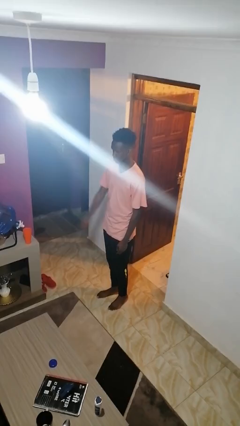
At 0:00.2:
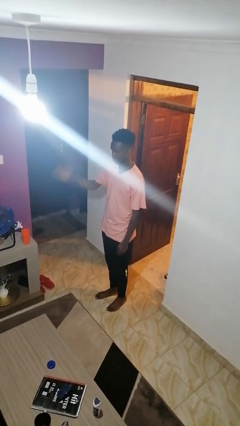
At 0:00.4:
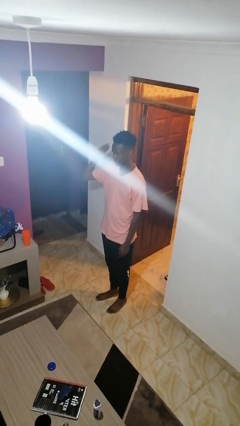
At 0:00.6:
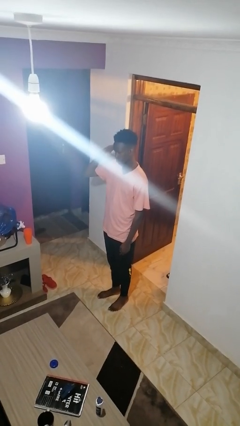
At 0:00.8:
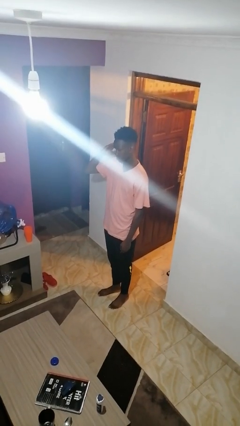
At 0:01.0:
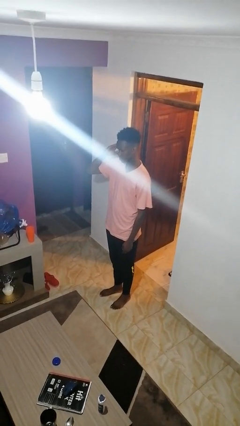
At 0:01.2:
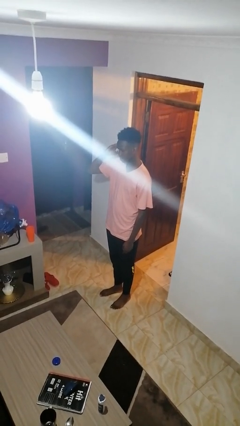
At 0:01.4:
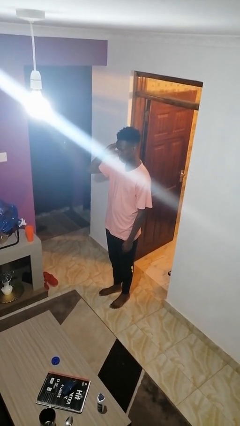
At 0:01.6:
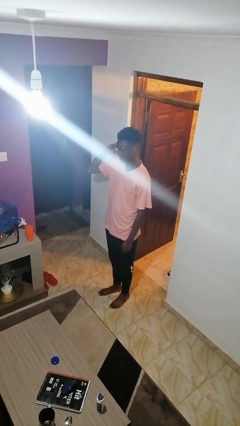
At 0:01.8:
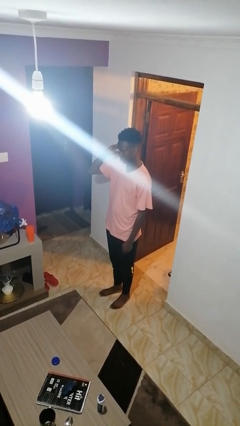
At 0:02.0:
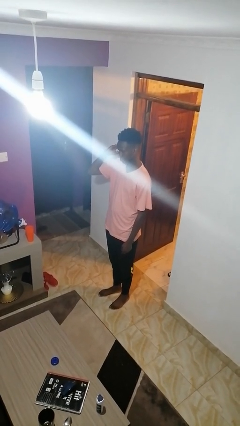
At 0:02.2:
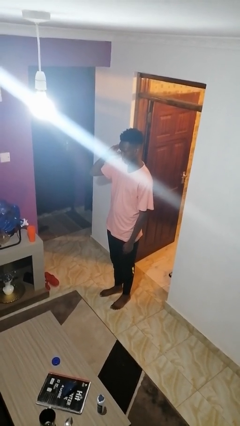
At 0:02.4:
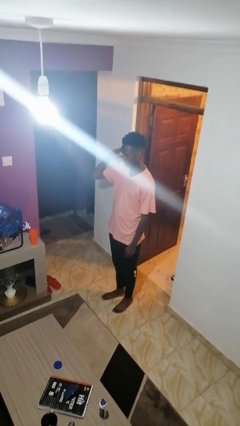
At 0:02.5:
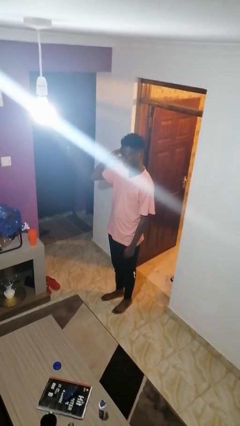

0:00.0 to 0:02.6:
person salutes

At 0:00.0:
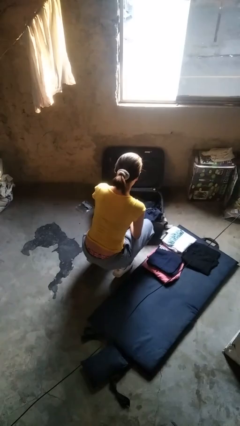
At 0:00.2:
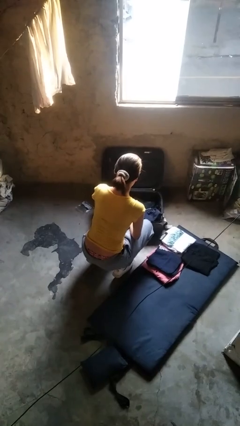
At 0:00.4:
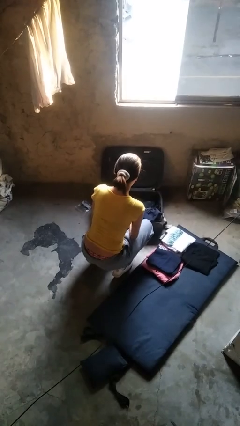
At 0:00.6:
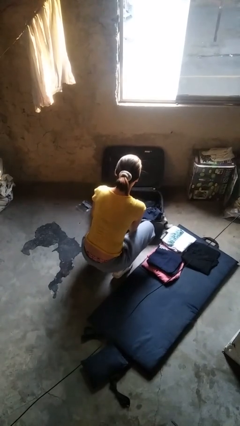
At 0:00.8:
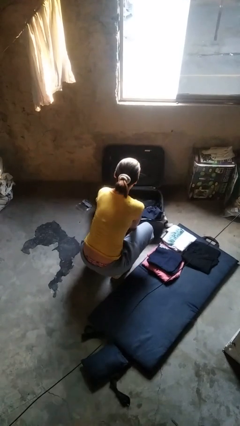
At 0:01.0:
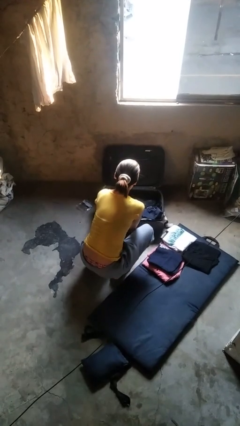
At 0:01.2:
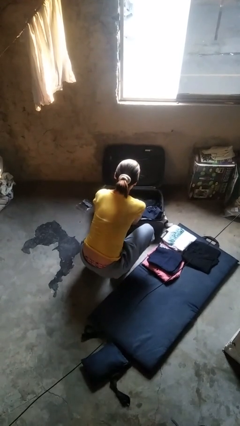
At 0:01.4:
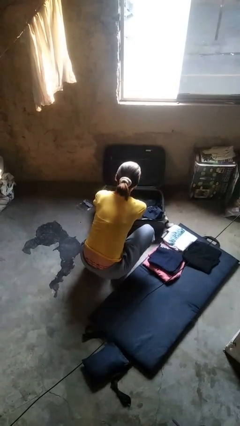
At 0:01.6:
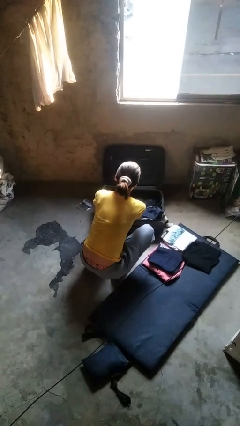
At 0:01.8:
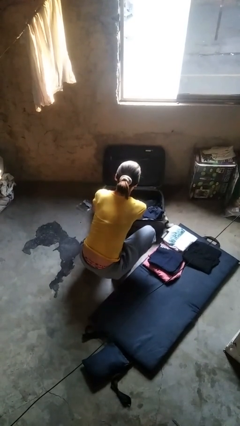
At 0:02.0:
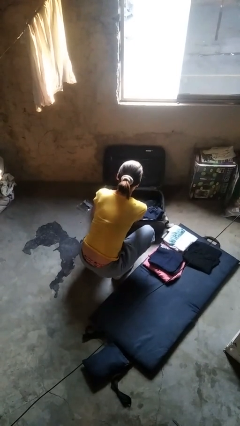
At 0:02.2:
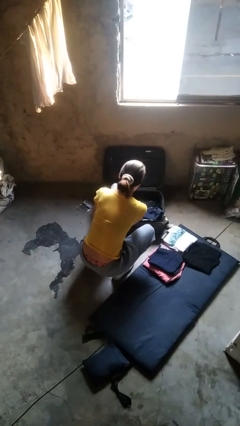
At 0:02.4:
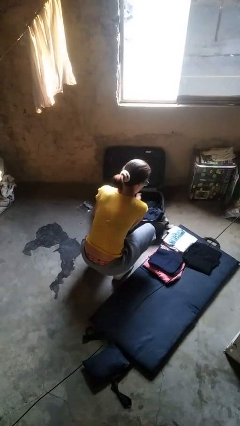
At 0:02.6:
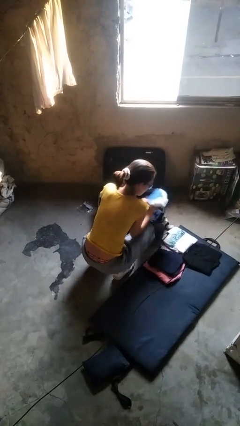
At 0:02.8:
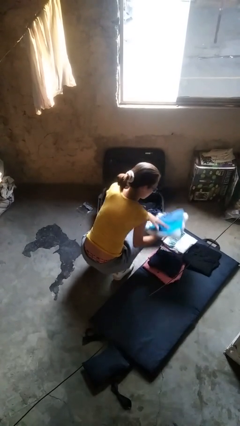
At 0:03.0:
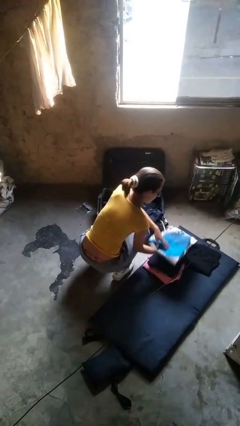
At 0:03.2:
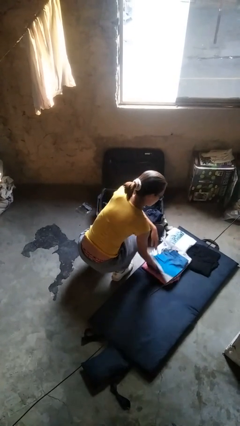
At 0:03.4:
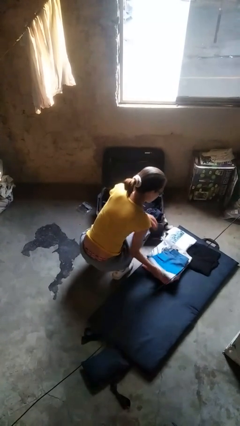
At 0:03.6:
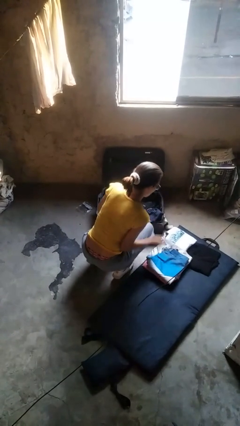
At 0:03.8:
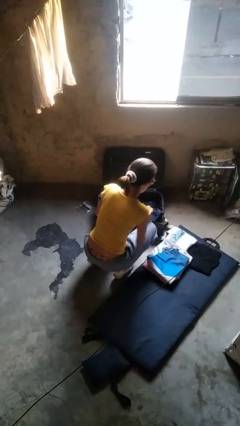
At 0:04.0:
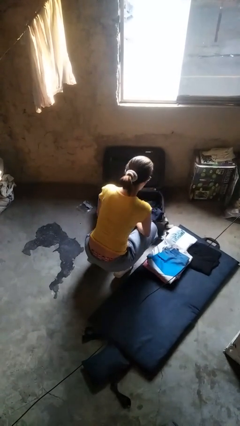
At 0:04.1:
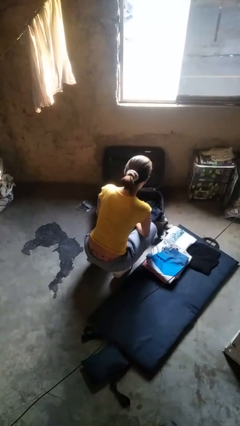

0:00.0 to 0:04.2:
person unloads clothes from suitcase

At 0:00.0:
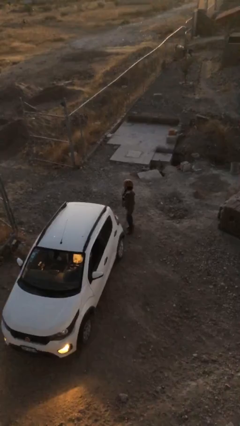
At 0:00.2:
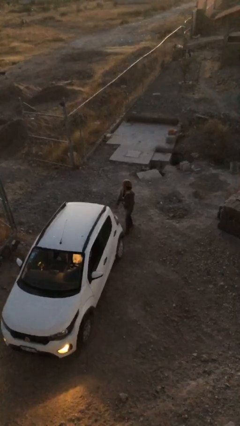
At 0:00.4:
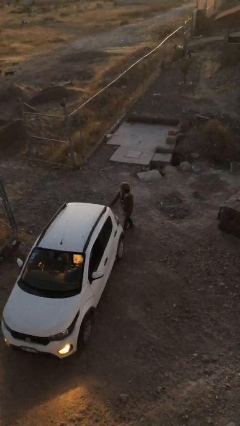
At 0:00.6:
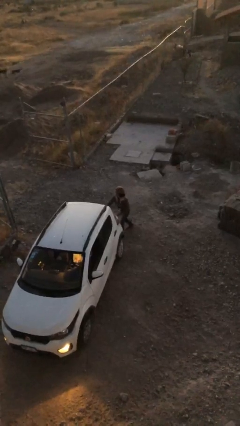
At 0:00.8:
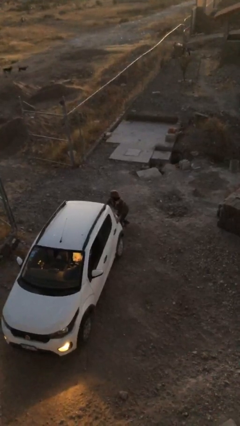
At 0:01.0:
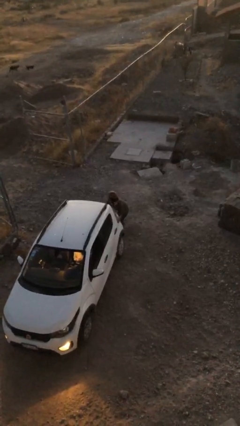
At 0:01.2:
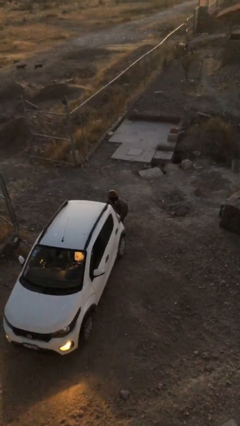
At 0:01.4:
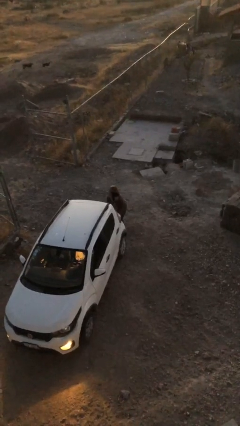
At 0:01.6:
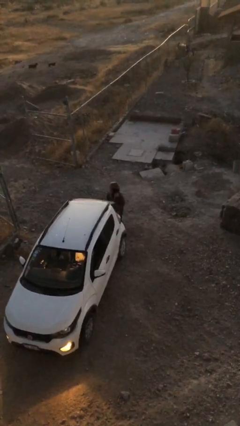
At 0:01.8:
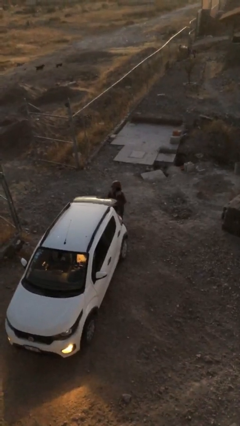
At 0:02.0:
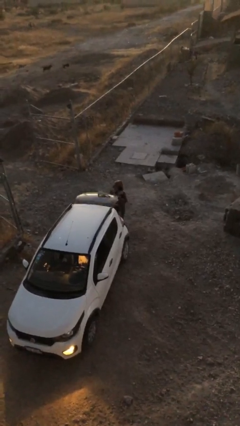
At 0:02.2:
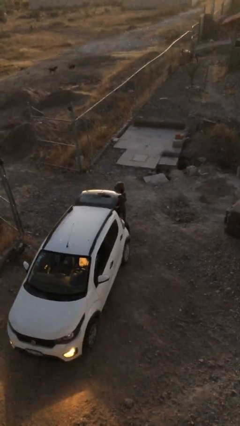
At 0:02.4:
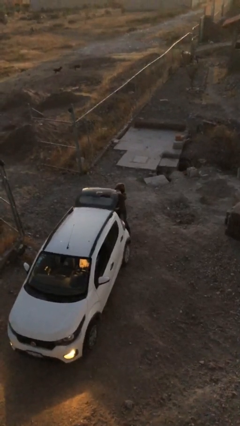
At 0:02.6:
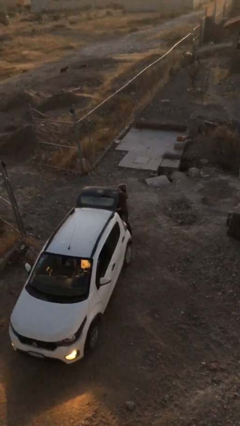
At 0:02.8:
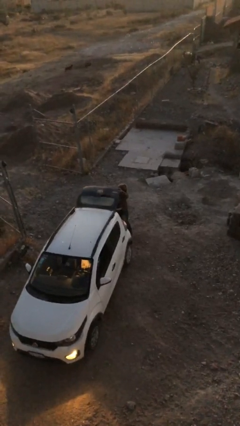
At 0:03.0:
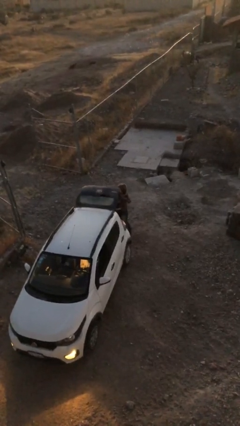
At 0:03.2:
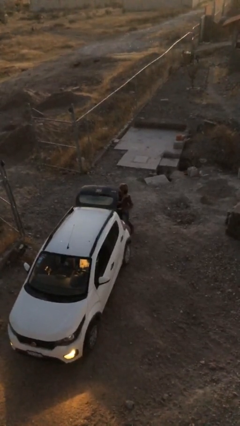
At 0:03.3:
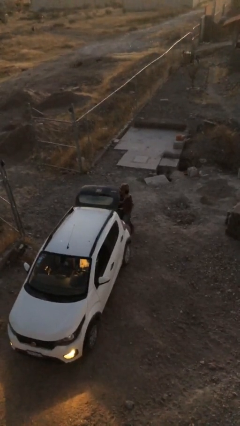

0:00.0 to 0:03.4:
person opens car trunk

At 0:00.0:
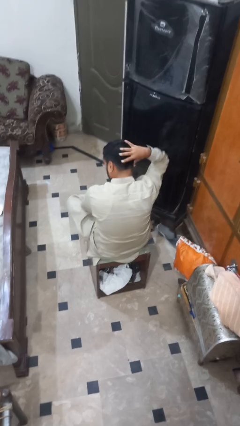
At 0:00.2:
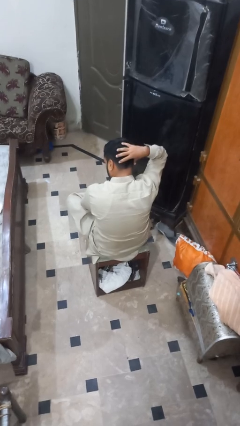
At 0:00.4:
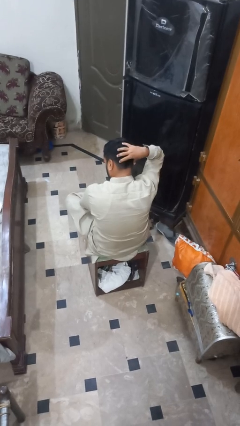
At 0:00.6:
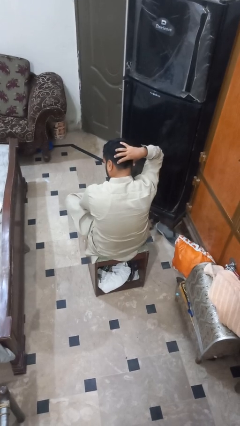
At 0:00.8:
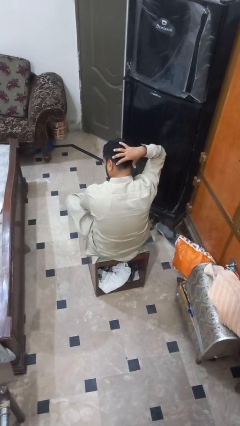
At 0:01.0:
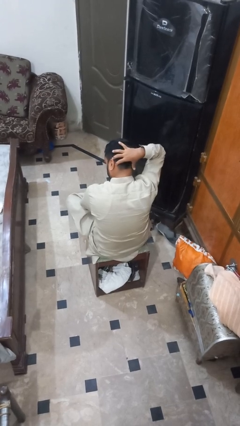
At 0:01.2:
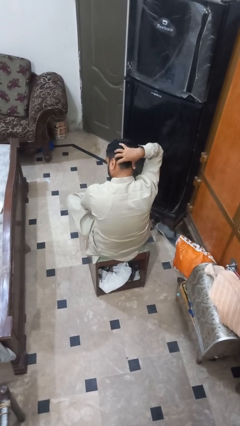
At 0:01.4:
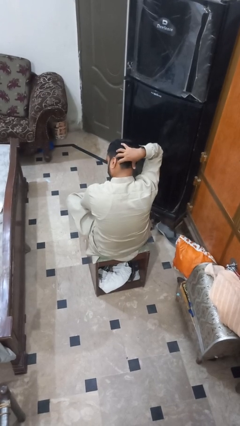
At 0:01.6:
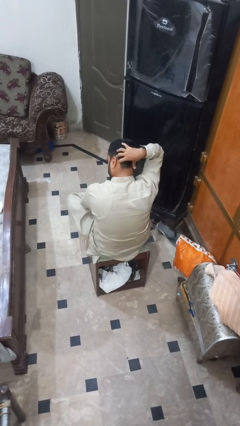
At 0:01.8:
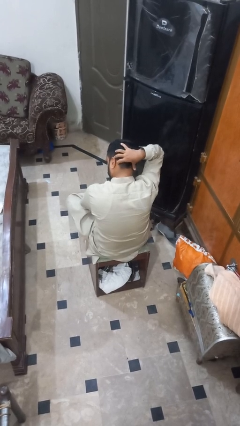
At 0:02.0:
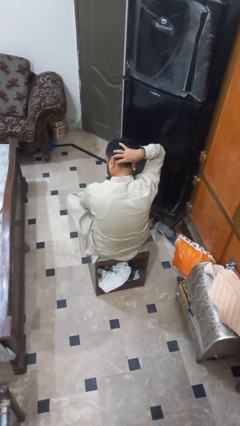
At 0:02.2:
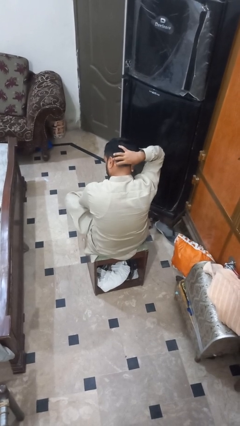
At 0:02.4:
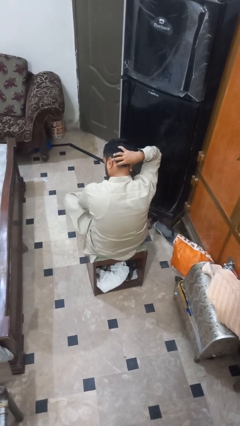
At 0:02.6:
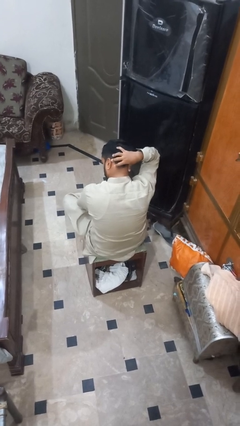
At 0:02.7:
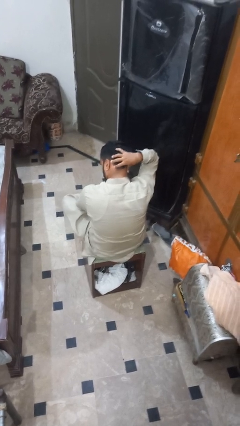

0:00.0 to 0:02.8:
person strokes hair

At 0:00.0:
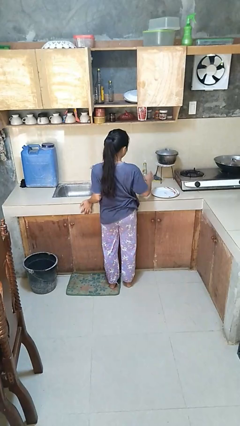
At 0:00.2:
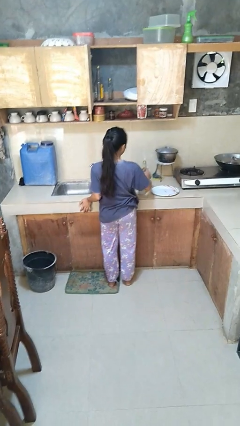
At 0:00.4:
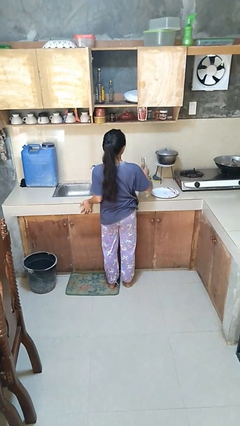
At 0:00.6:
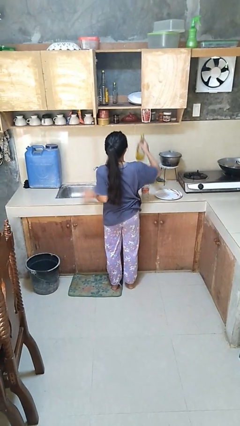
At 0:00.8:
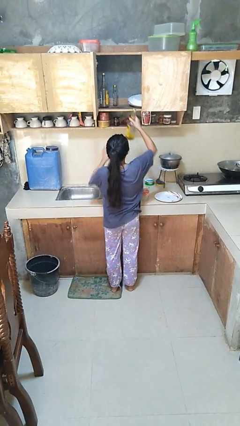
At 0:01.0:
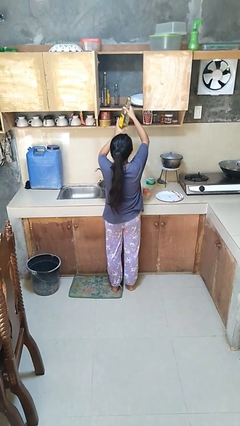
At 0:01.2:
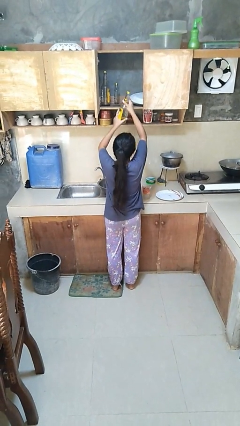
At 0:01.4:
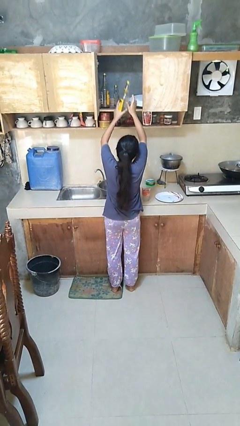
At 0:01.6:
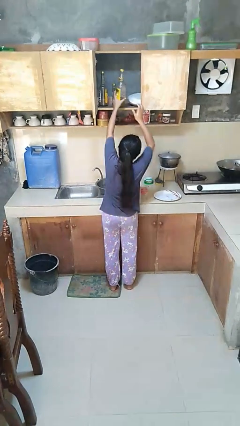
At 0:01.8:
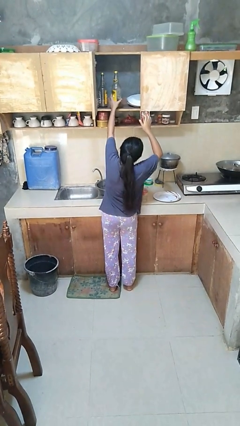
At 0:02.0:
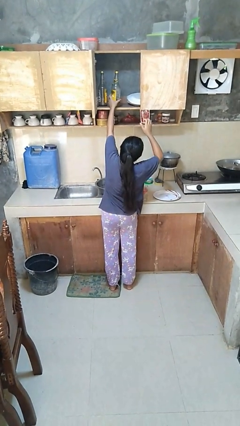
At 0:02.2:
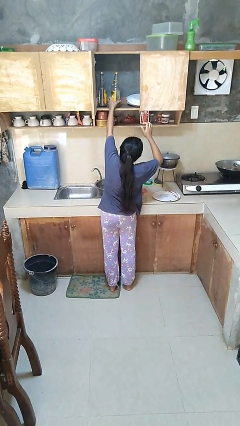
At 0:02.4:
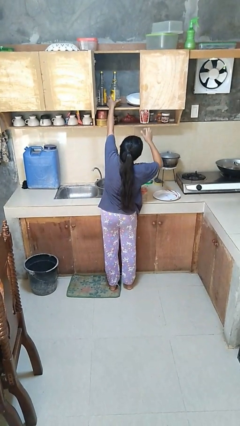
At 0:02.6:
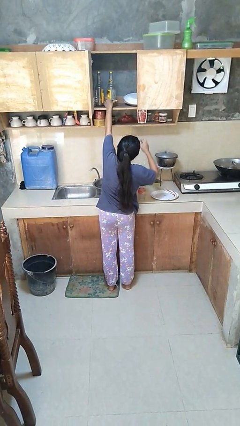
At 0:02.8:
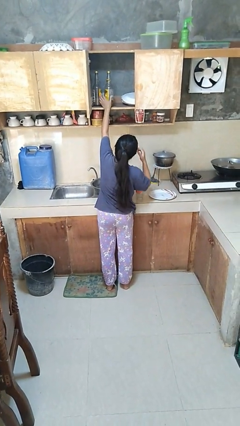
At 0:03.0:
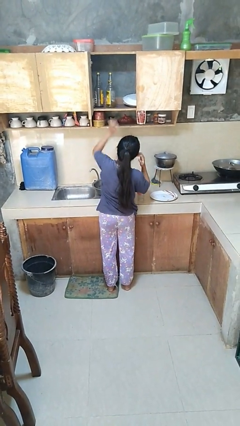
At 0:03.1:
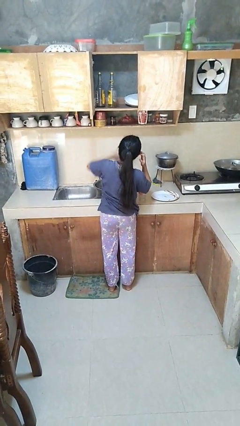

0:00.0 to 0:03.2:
person puts object in cabinet

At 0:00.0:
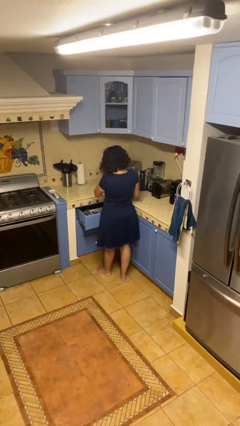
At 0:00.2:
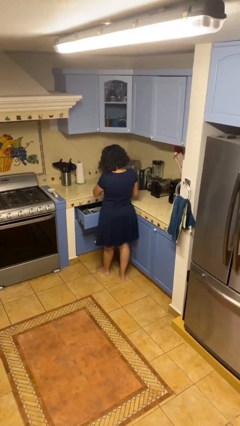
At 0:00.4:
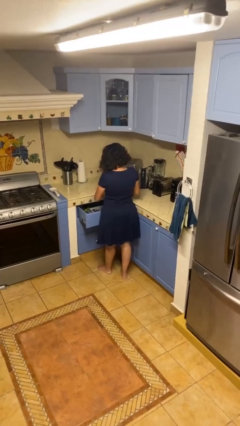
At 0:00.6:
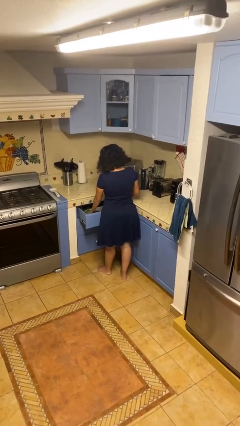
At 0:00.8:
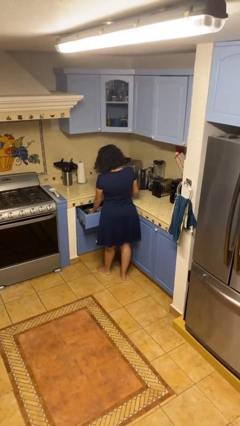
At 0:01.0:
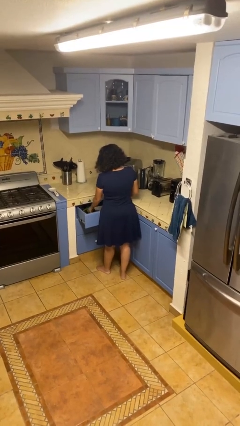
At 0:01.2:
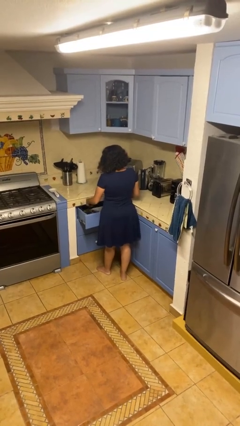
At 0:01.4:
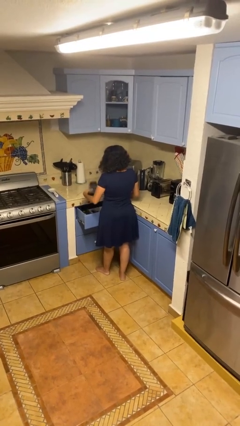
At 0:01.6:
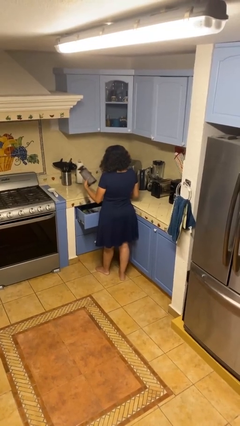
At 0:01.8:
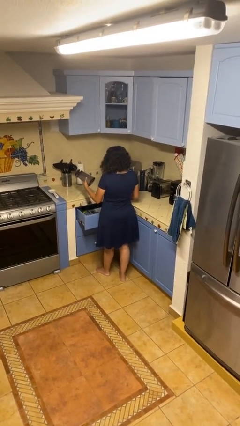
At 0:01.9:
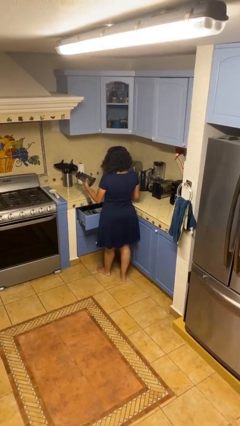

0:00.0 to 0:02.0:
person takes object from kitchen drawer
